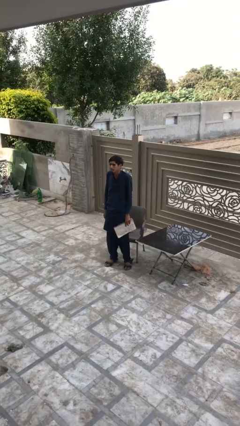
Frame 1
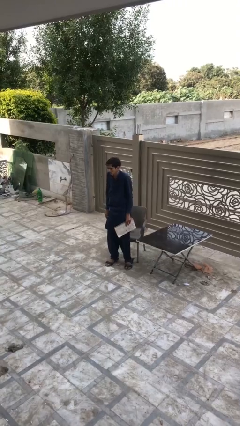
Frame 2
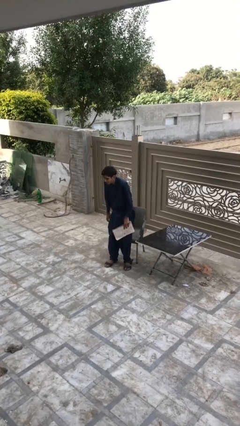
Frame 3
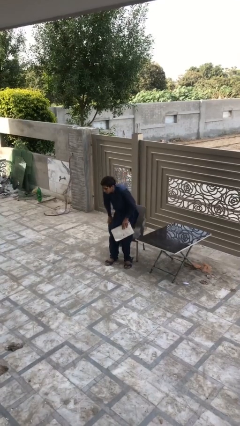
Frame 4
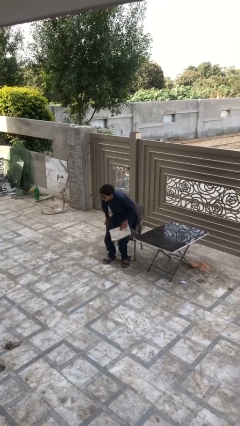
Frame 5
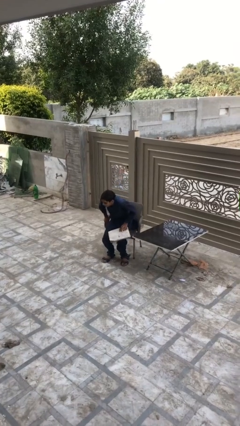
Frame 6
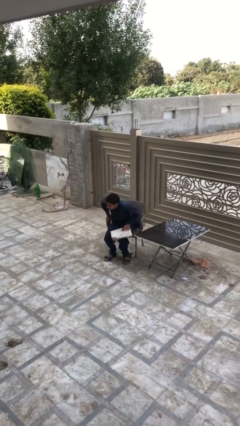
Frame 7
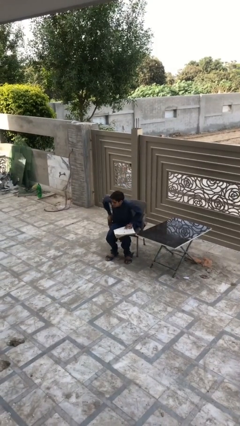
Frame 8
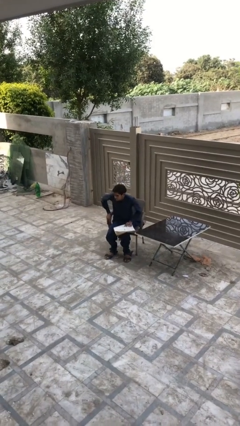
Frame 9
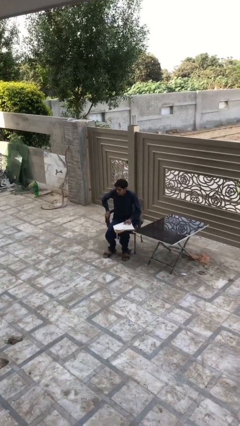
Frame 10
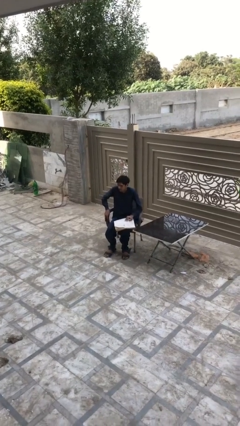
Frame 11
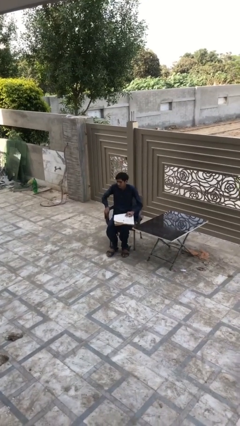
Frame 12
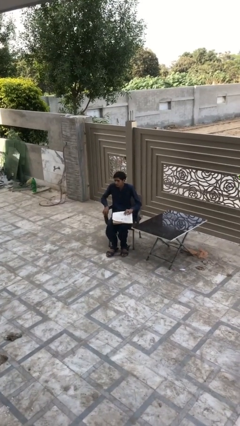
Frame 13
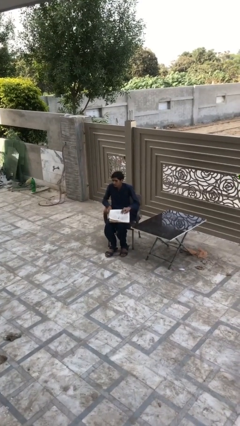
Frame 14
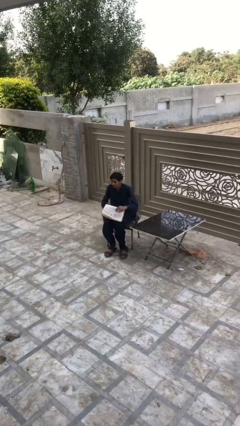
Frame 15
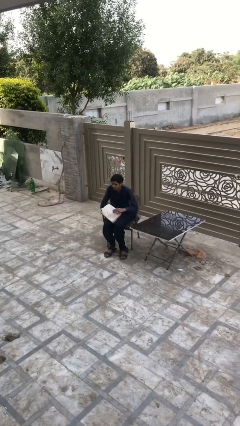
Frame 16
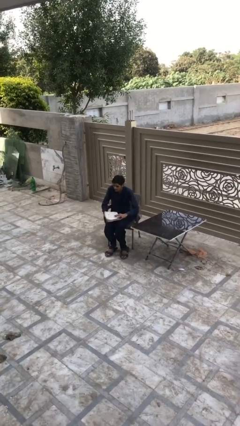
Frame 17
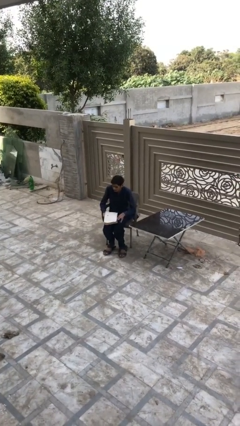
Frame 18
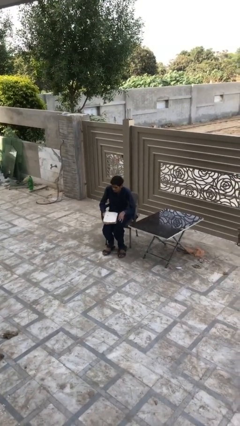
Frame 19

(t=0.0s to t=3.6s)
person sits down

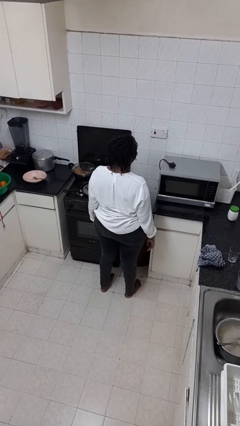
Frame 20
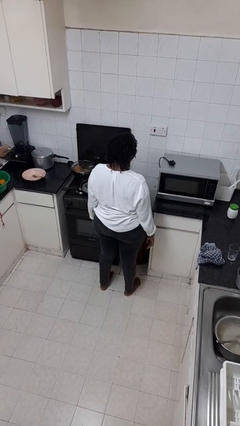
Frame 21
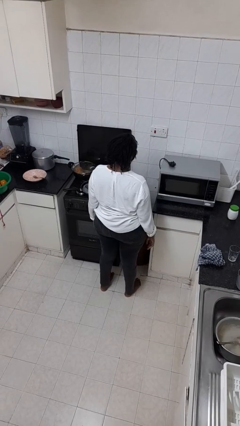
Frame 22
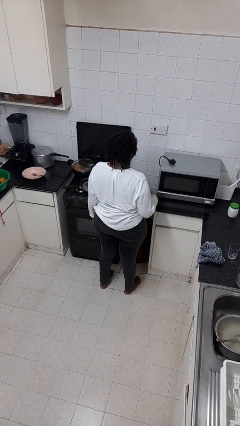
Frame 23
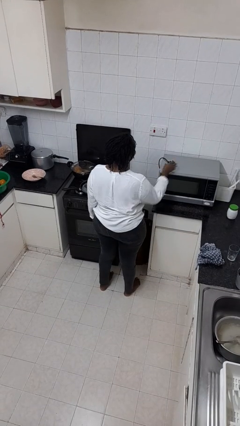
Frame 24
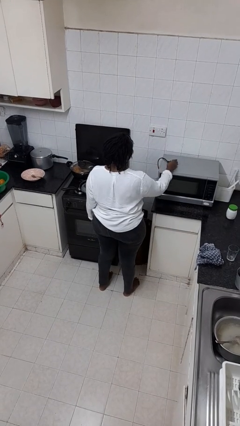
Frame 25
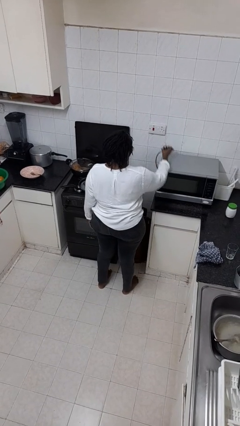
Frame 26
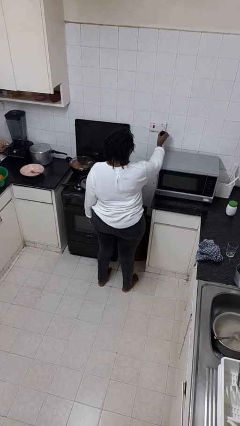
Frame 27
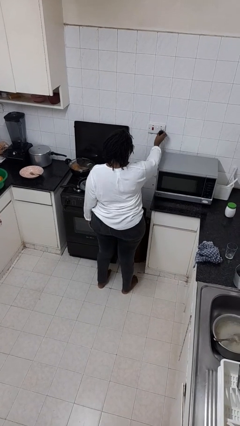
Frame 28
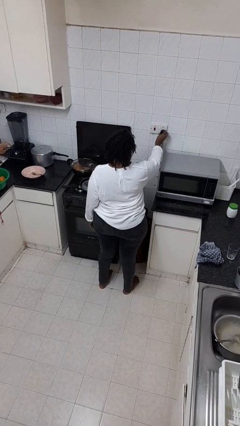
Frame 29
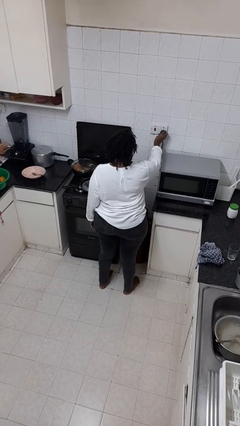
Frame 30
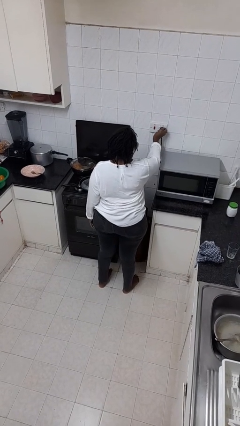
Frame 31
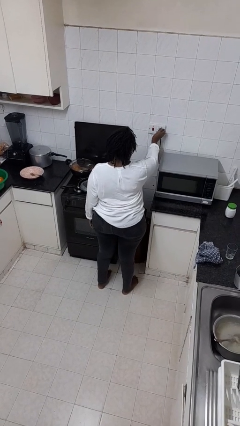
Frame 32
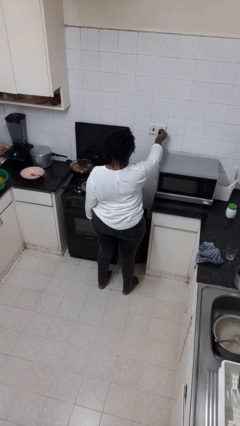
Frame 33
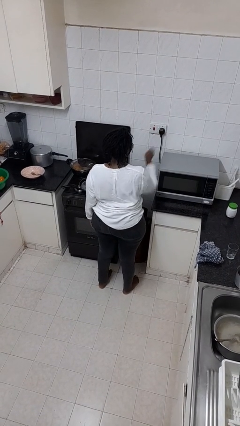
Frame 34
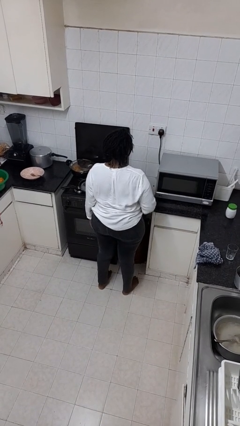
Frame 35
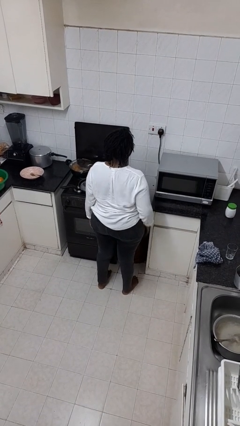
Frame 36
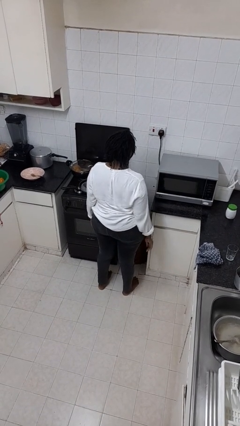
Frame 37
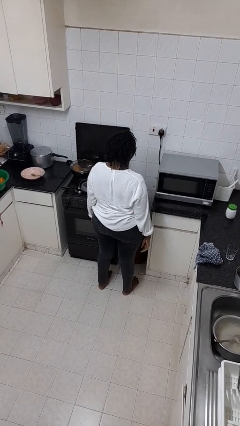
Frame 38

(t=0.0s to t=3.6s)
person plugs into electrical socket

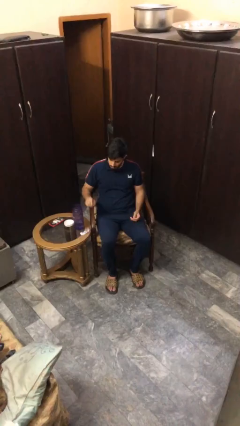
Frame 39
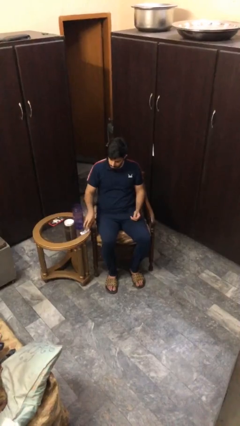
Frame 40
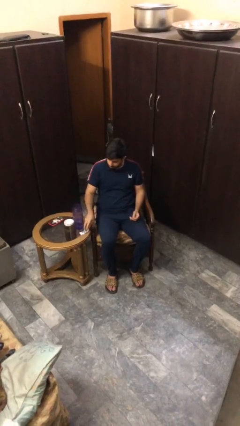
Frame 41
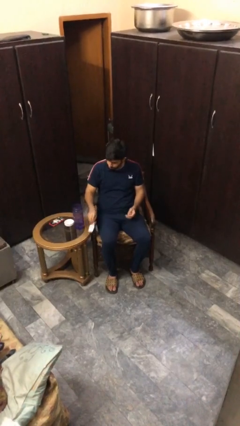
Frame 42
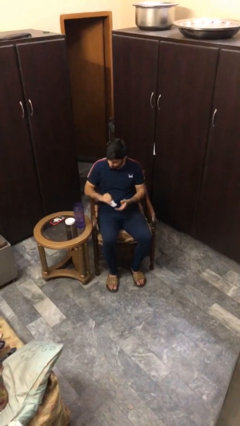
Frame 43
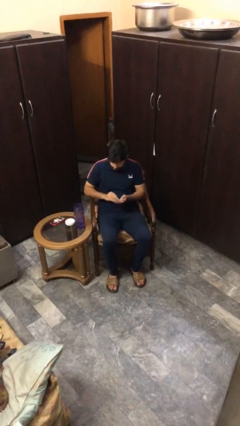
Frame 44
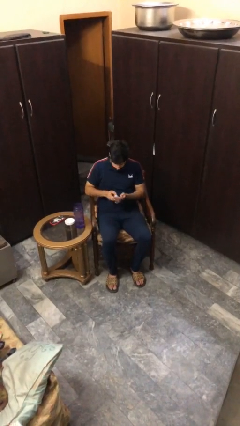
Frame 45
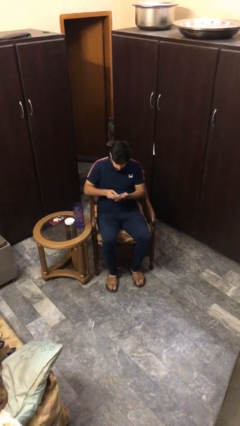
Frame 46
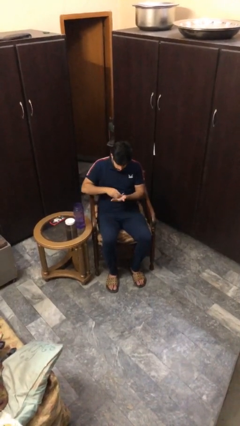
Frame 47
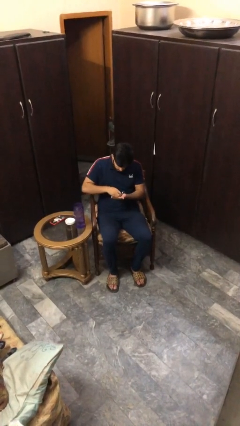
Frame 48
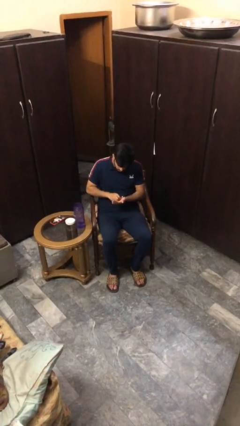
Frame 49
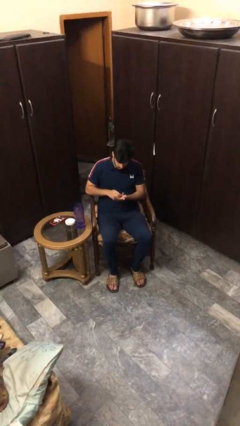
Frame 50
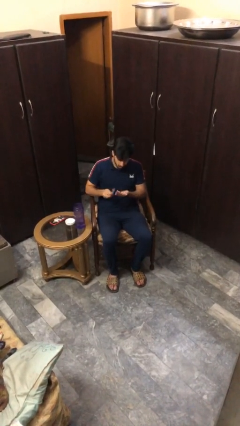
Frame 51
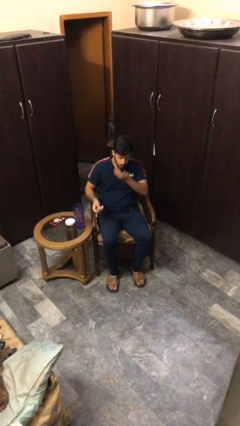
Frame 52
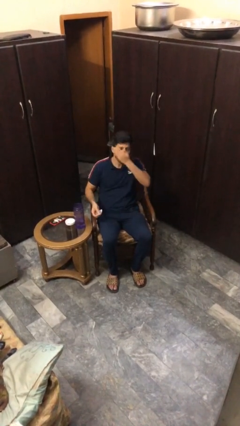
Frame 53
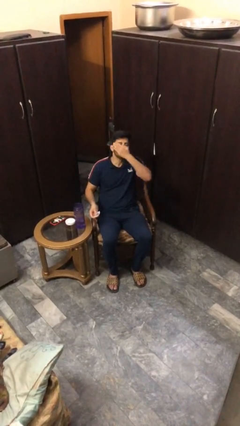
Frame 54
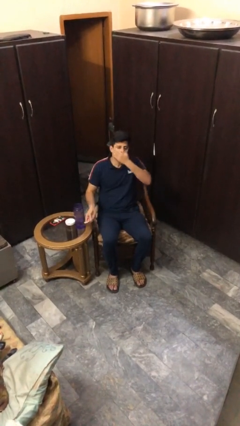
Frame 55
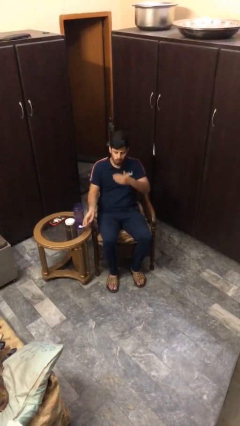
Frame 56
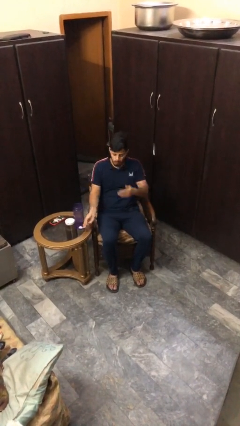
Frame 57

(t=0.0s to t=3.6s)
person takes medicine pills

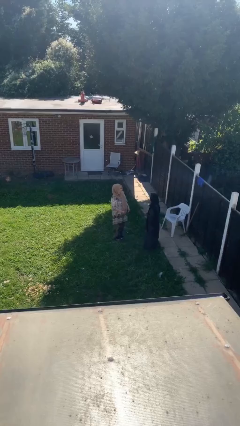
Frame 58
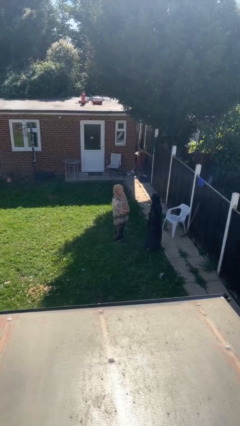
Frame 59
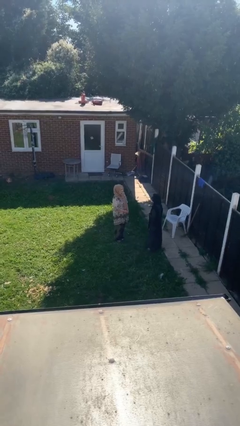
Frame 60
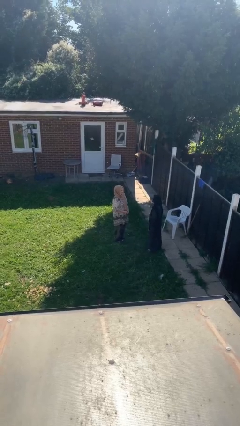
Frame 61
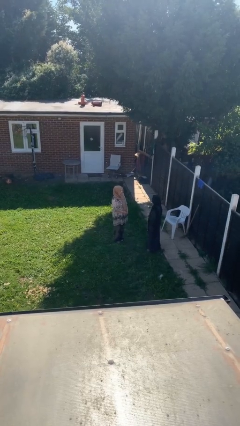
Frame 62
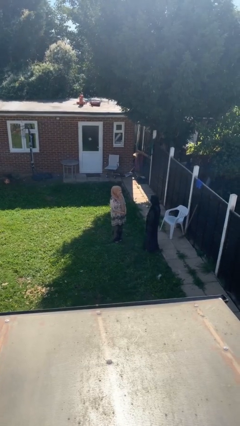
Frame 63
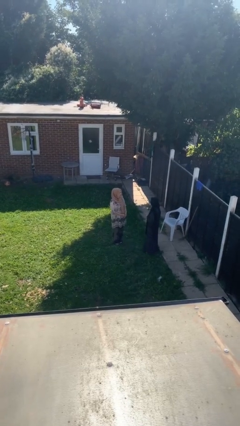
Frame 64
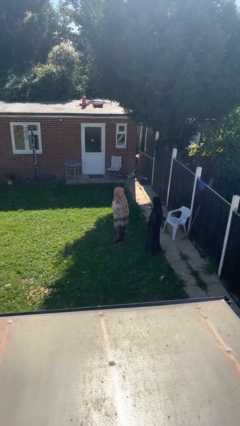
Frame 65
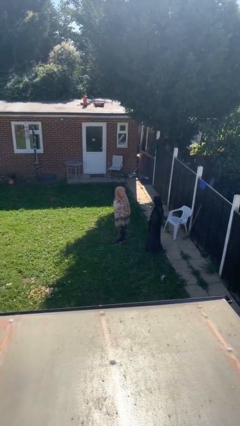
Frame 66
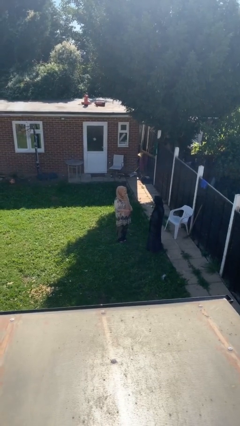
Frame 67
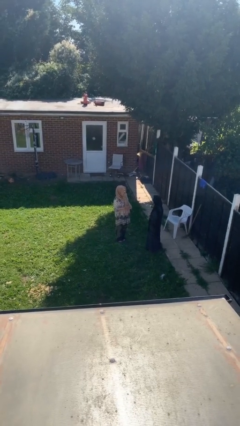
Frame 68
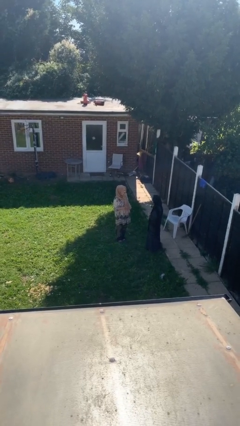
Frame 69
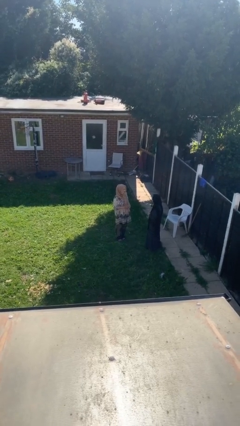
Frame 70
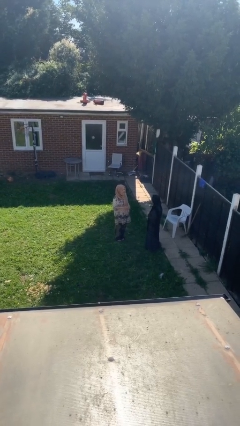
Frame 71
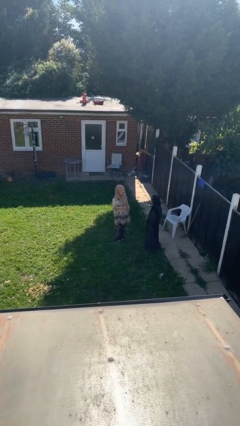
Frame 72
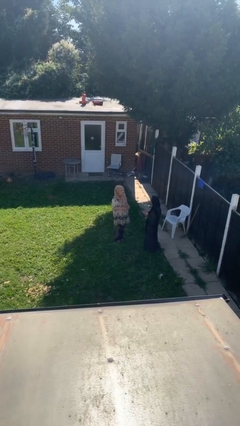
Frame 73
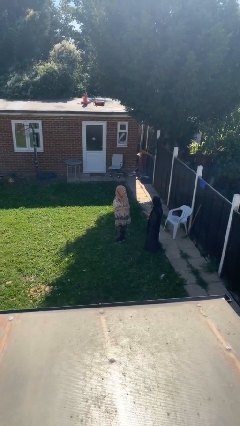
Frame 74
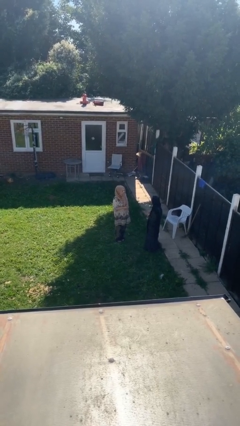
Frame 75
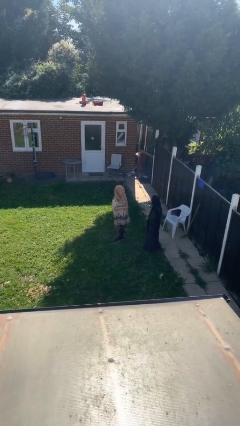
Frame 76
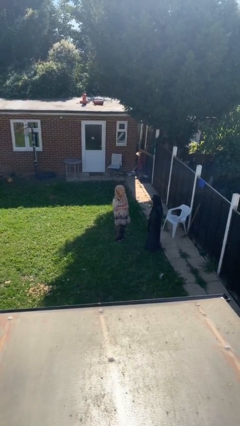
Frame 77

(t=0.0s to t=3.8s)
person talks to person

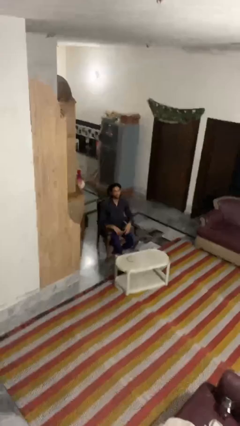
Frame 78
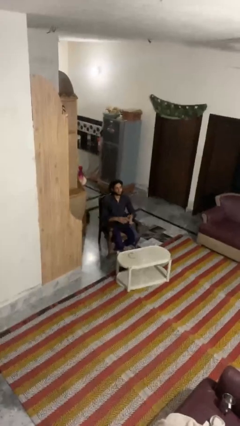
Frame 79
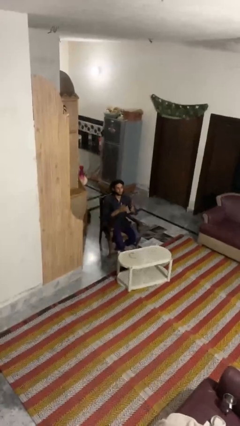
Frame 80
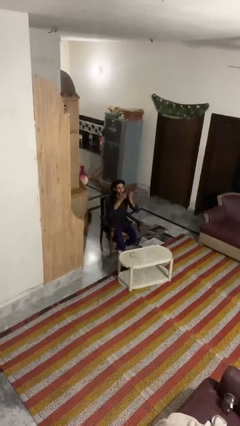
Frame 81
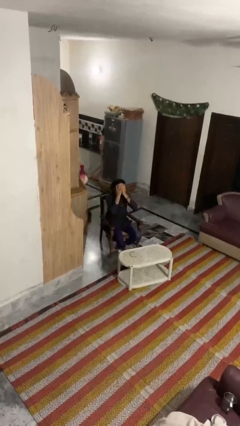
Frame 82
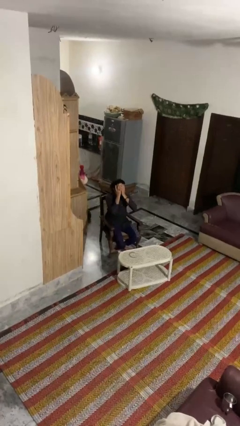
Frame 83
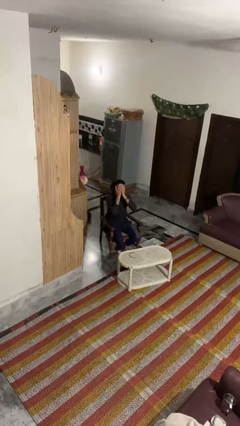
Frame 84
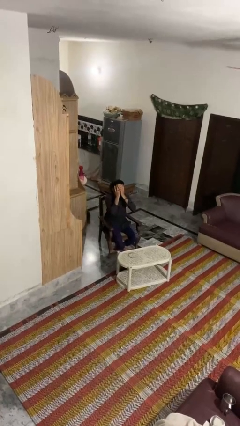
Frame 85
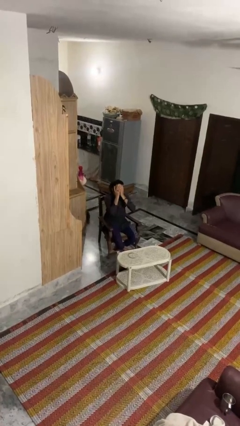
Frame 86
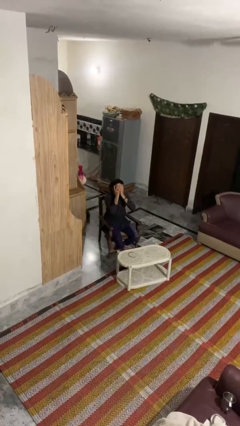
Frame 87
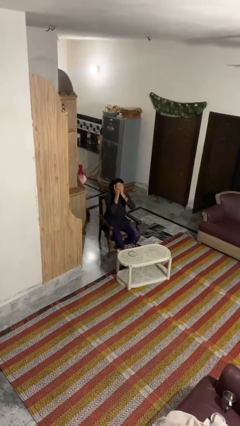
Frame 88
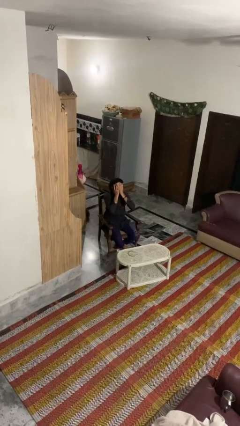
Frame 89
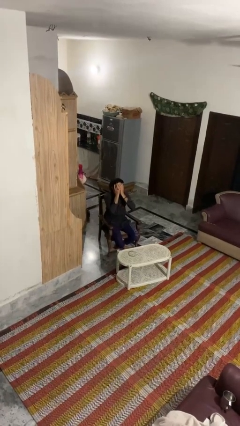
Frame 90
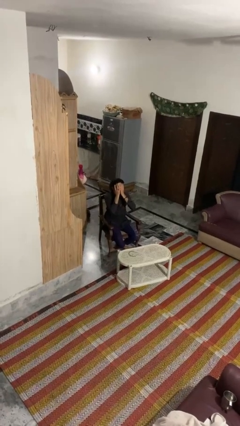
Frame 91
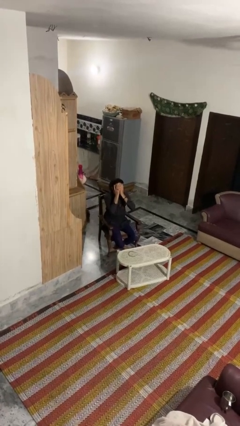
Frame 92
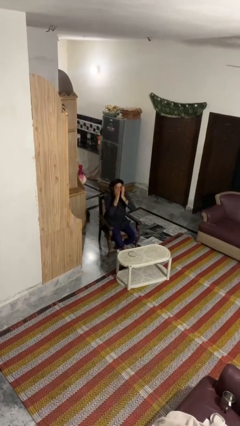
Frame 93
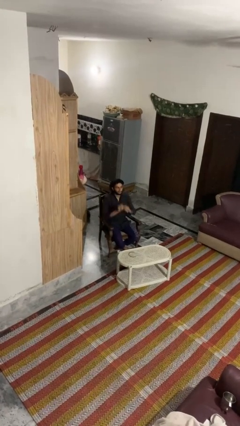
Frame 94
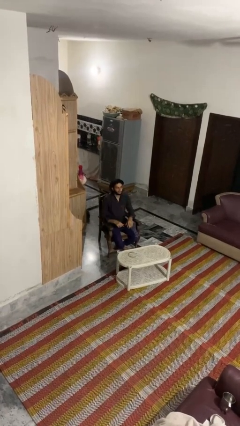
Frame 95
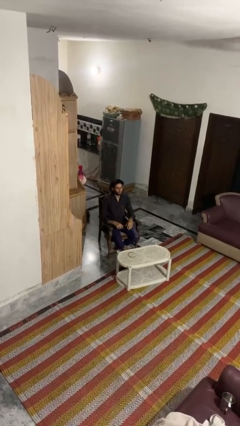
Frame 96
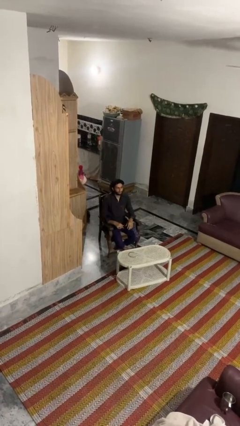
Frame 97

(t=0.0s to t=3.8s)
person covers face with hands
